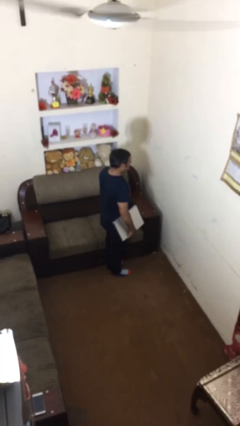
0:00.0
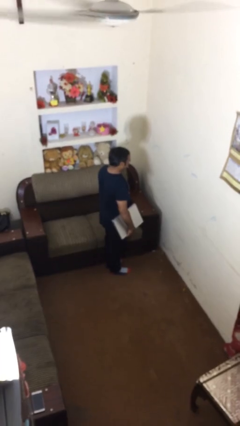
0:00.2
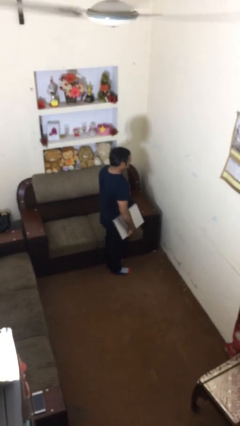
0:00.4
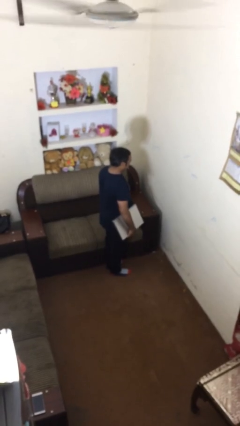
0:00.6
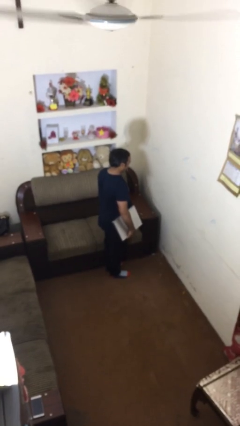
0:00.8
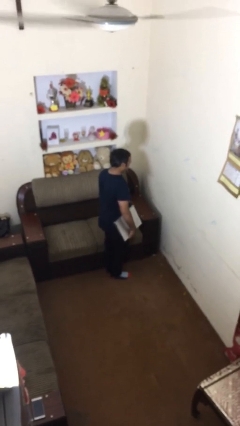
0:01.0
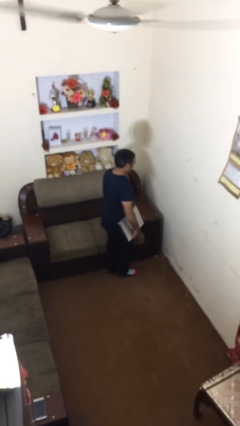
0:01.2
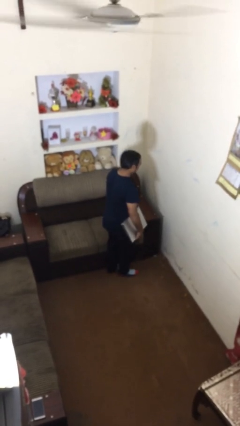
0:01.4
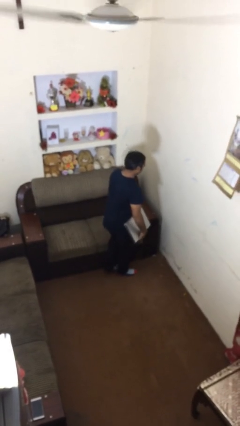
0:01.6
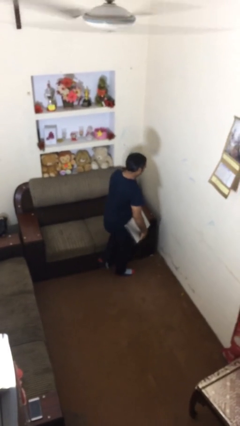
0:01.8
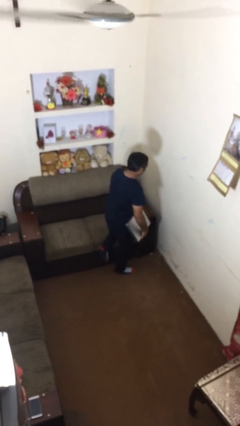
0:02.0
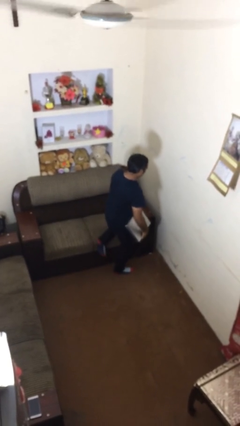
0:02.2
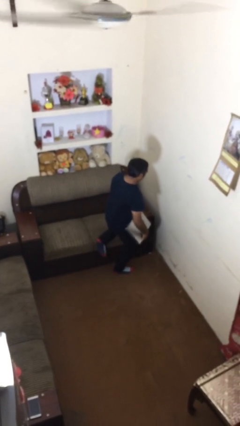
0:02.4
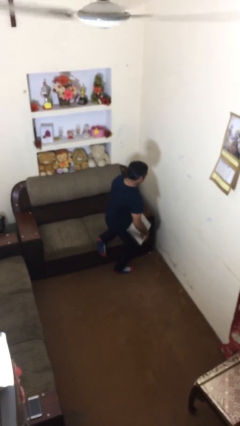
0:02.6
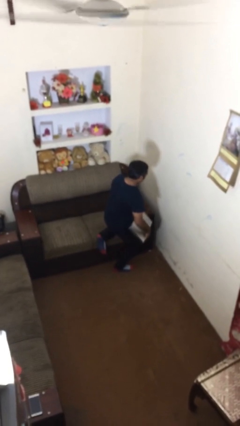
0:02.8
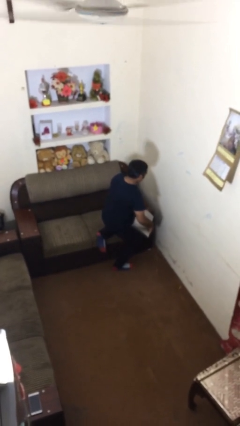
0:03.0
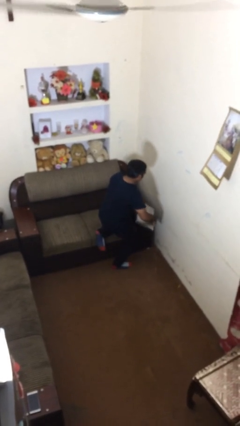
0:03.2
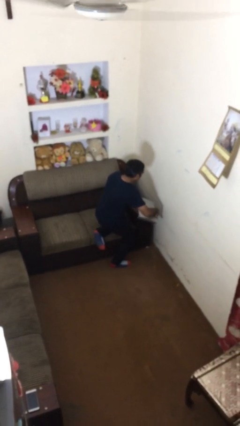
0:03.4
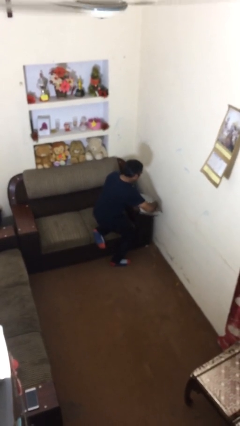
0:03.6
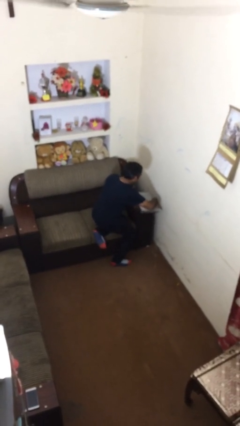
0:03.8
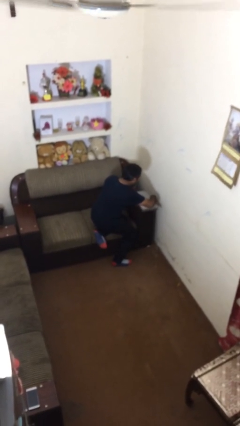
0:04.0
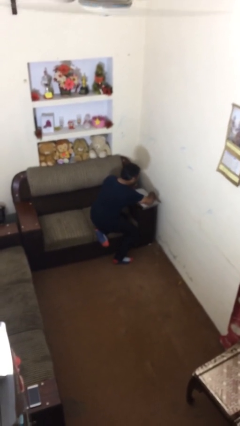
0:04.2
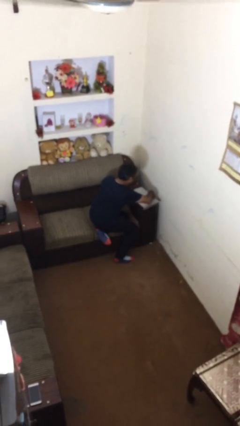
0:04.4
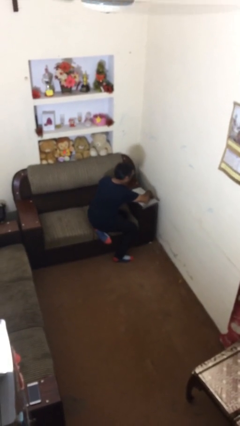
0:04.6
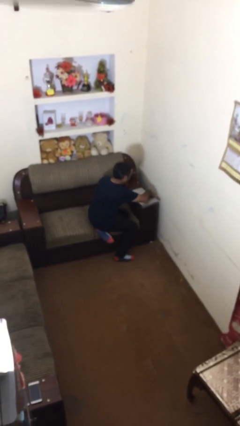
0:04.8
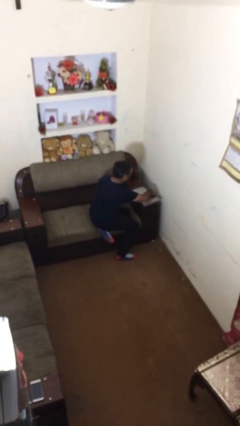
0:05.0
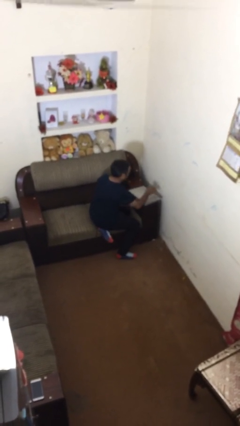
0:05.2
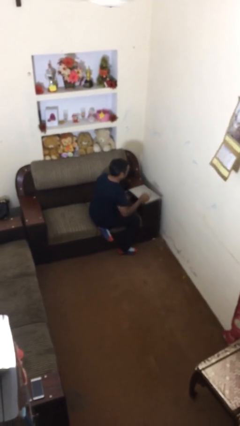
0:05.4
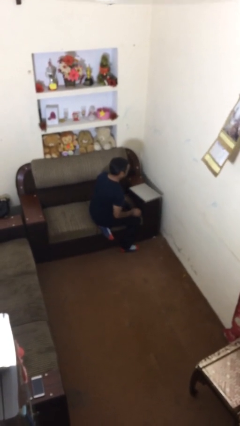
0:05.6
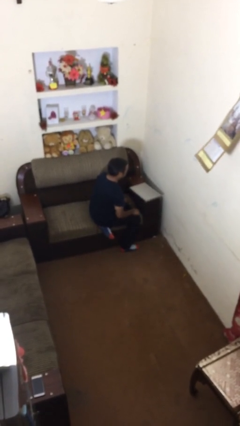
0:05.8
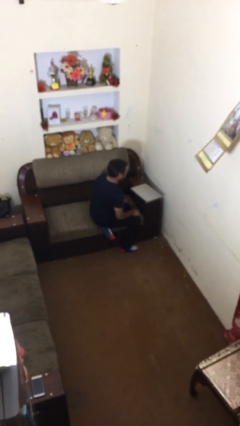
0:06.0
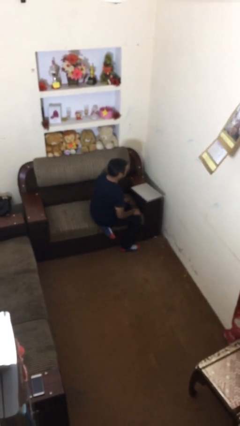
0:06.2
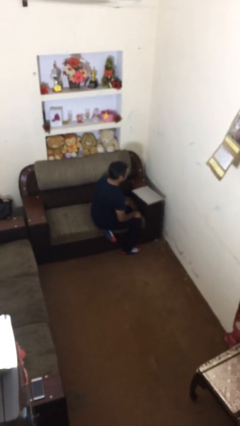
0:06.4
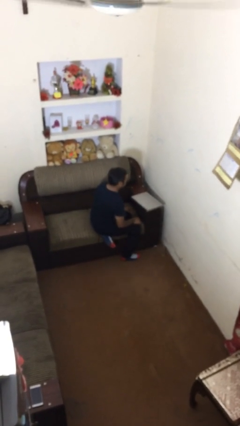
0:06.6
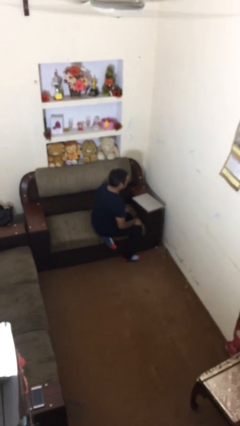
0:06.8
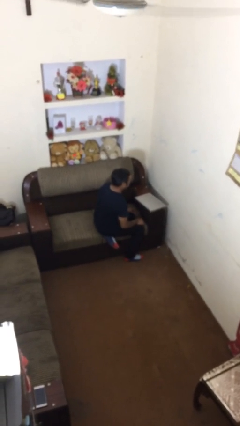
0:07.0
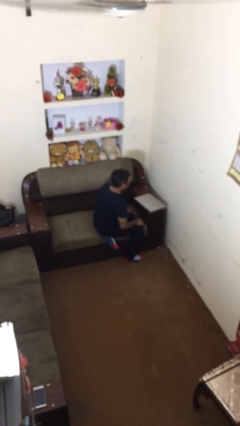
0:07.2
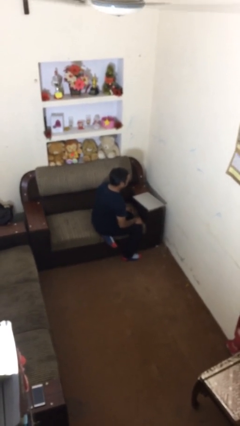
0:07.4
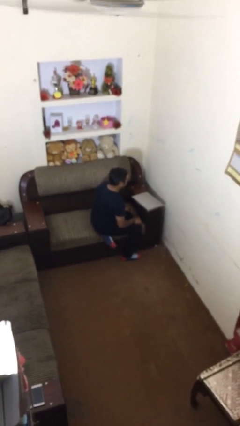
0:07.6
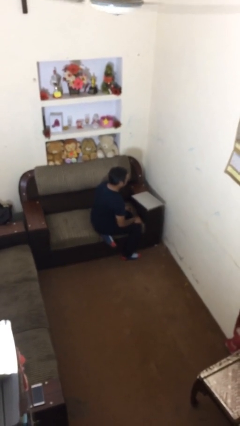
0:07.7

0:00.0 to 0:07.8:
person sits down

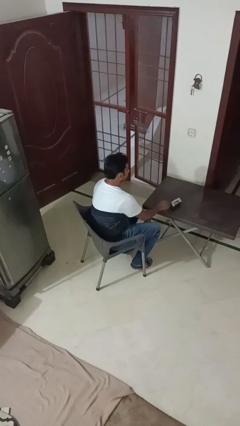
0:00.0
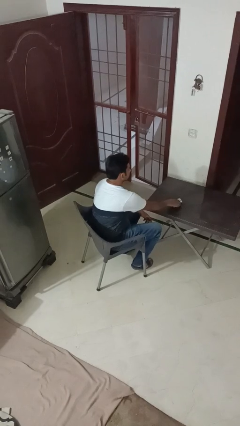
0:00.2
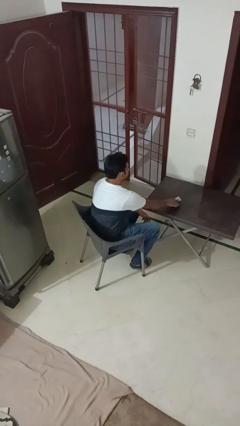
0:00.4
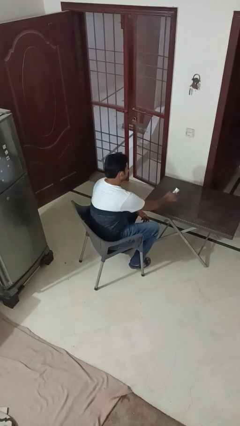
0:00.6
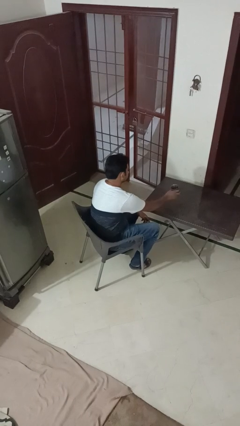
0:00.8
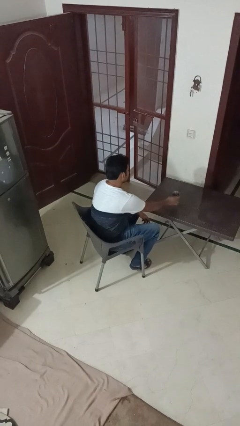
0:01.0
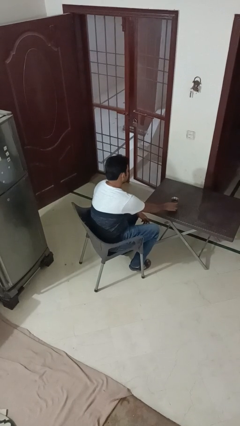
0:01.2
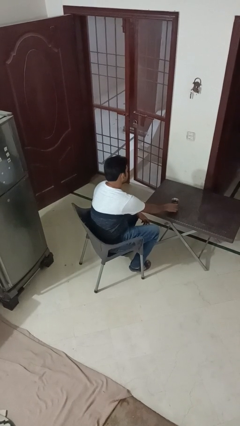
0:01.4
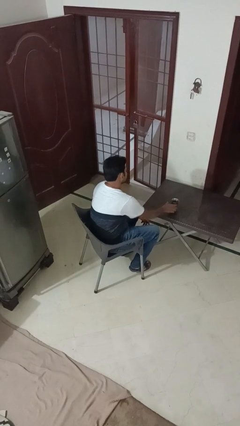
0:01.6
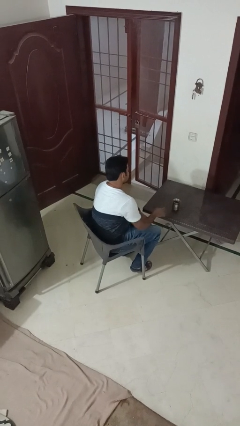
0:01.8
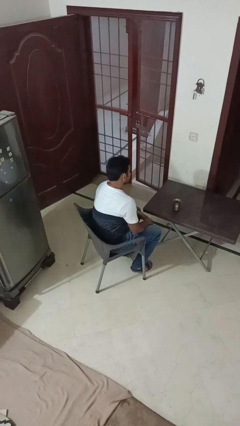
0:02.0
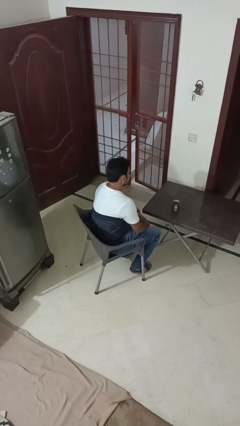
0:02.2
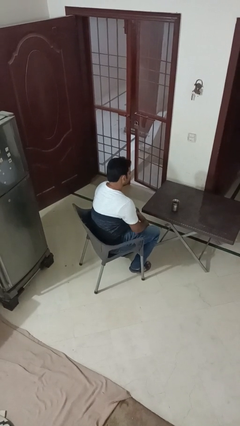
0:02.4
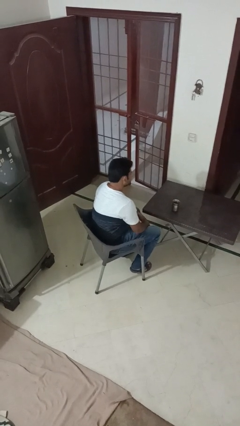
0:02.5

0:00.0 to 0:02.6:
person sets upright glass

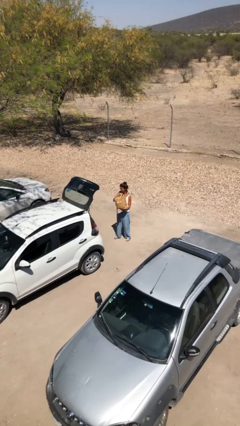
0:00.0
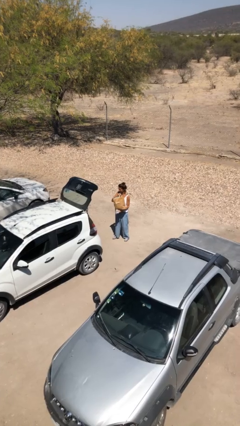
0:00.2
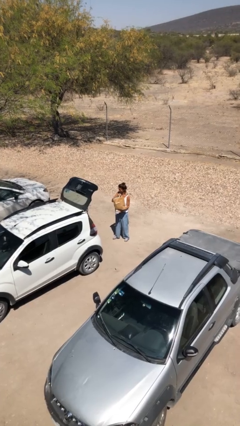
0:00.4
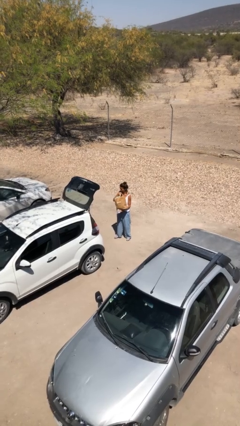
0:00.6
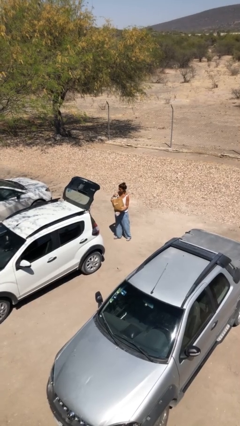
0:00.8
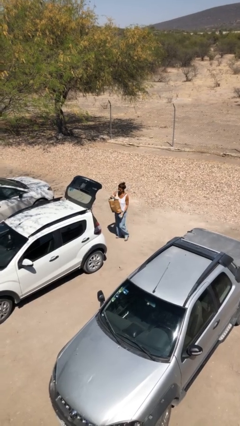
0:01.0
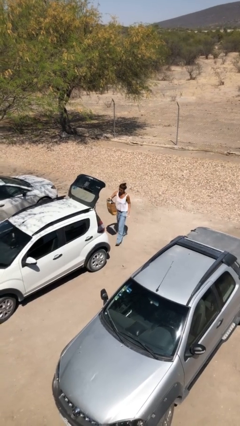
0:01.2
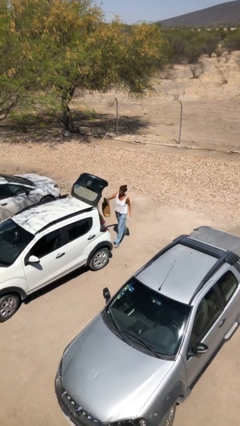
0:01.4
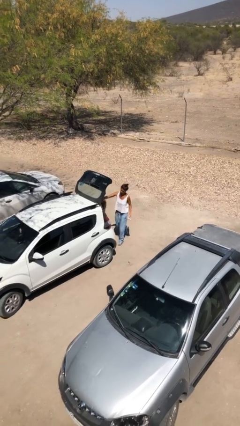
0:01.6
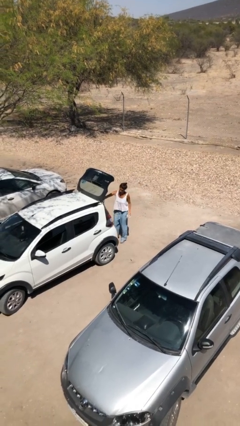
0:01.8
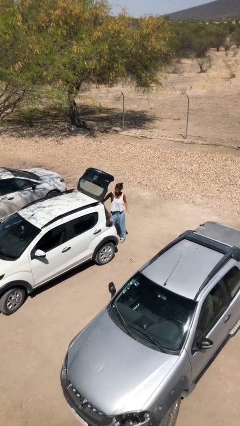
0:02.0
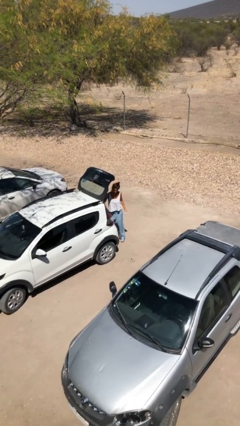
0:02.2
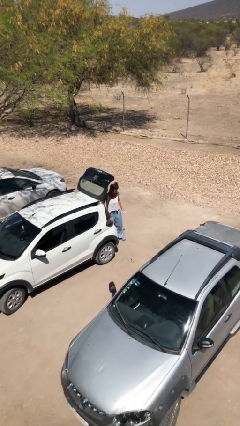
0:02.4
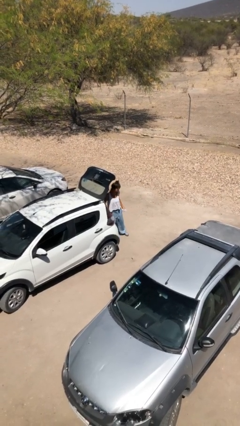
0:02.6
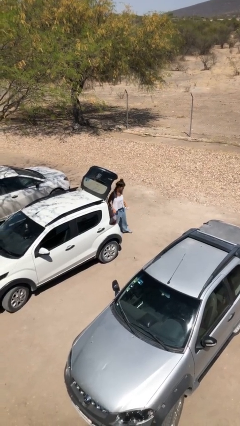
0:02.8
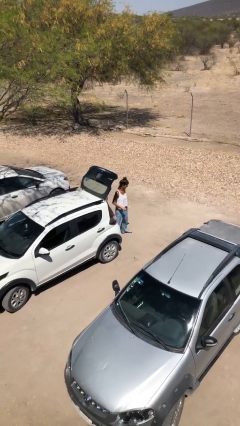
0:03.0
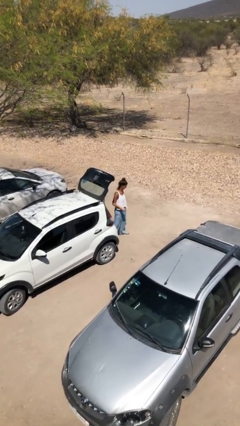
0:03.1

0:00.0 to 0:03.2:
person loads car

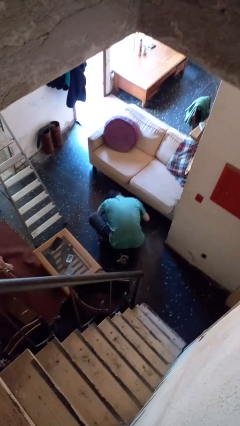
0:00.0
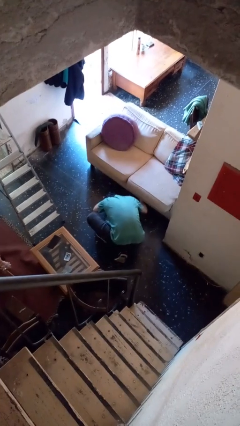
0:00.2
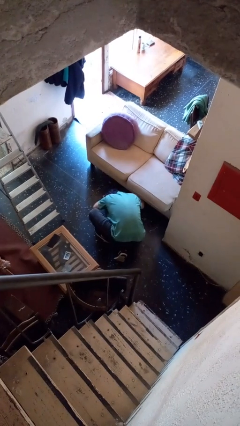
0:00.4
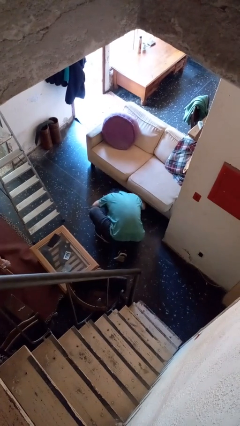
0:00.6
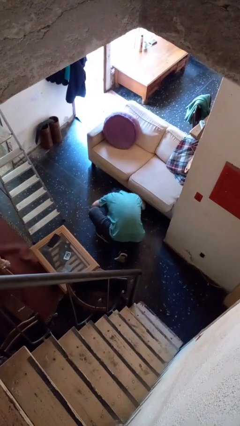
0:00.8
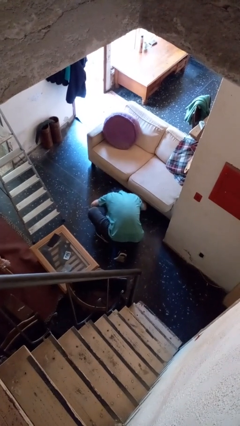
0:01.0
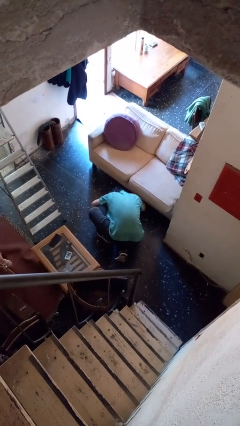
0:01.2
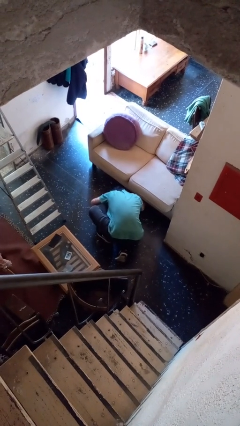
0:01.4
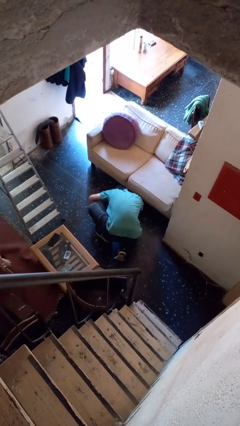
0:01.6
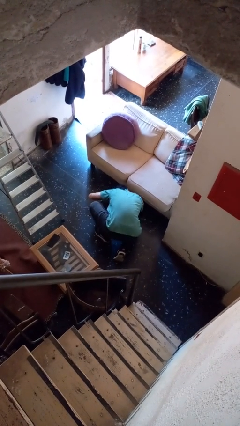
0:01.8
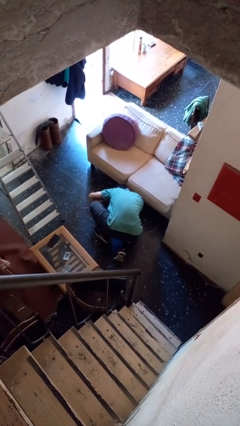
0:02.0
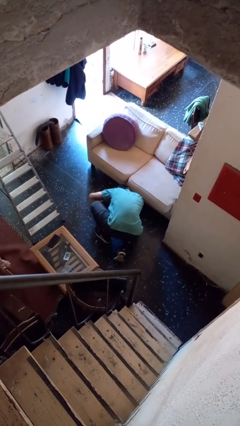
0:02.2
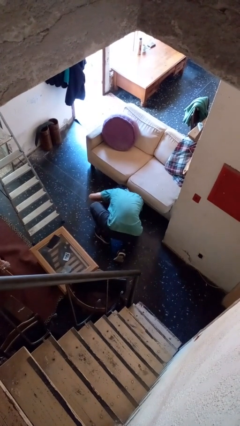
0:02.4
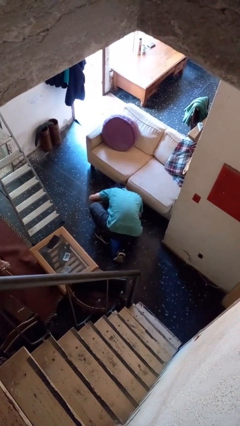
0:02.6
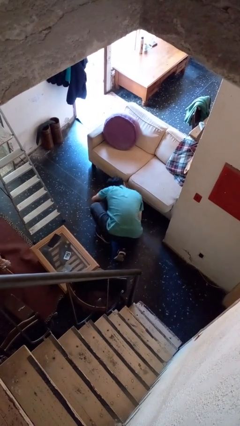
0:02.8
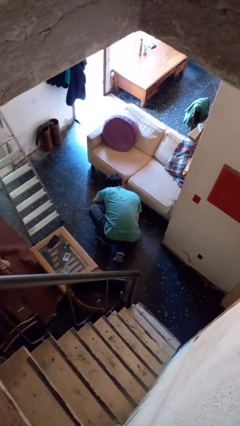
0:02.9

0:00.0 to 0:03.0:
person searches under couch

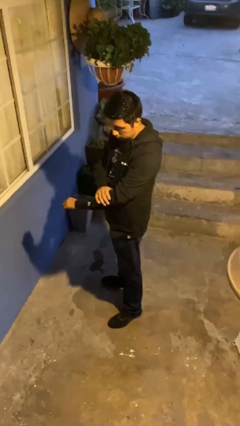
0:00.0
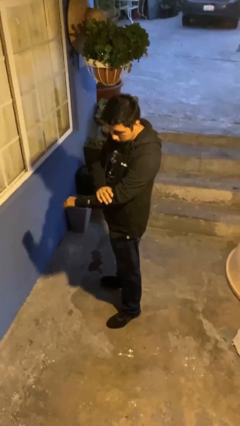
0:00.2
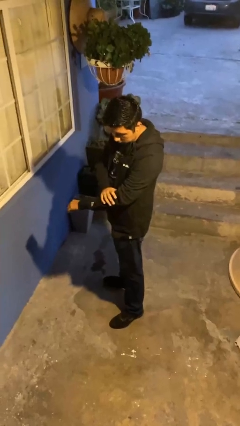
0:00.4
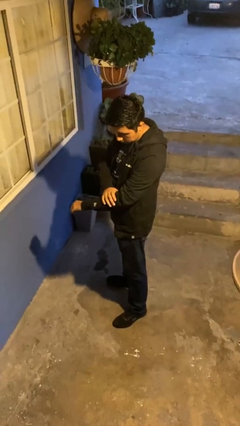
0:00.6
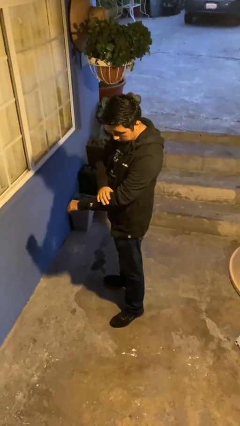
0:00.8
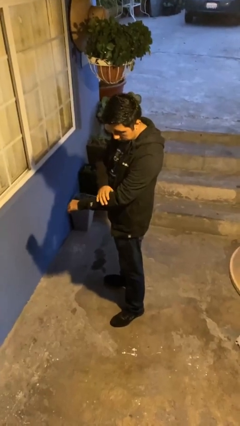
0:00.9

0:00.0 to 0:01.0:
person swats bug

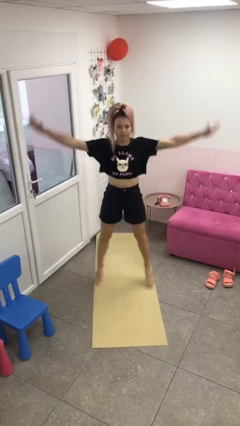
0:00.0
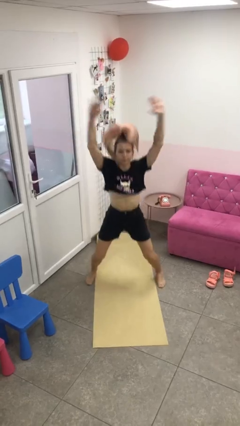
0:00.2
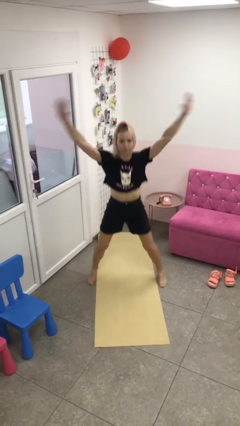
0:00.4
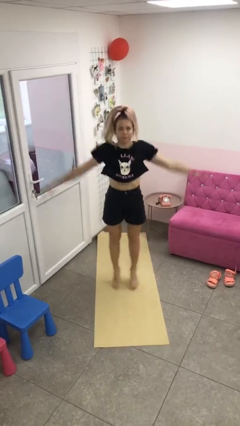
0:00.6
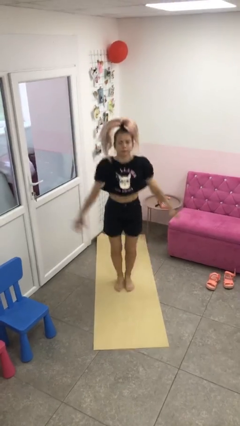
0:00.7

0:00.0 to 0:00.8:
person exercises with jumping jacks
